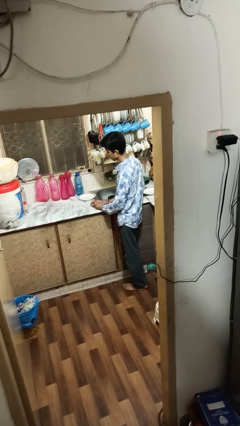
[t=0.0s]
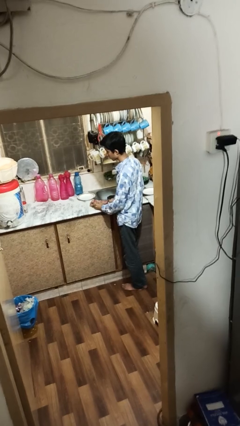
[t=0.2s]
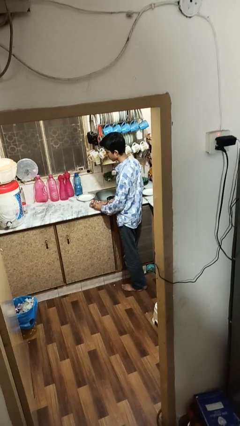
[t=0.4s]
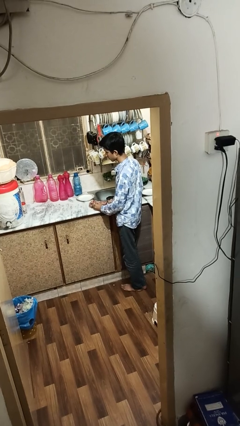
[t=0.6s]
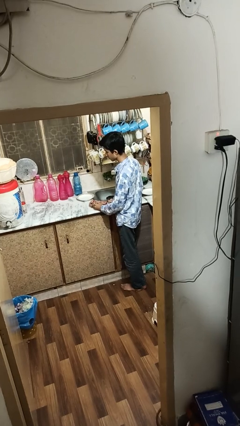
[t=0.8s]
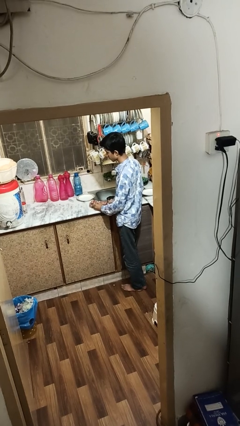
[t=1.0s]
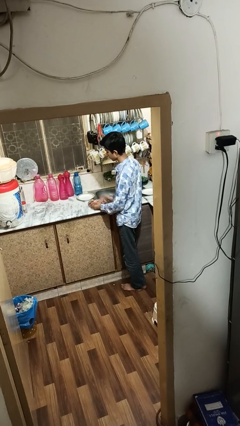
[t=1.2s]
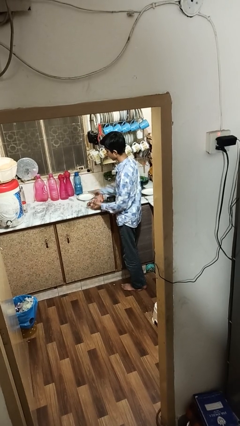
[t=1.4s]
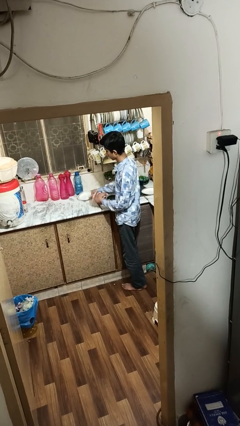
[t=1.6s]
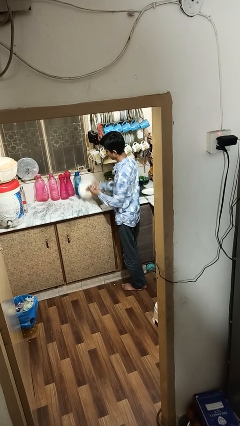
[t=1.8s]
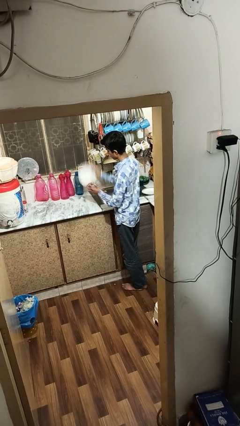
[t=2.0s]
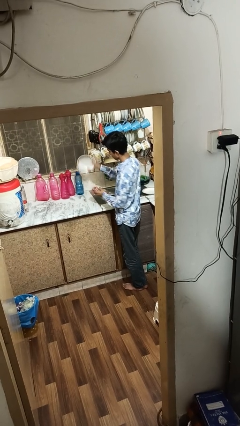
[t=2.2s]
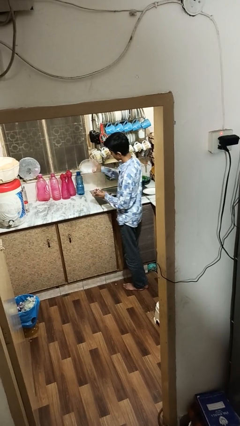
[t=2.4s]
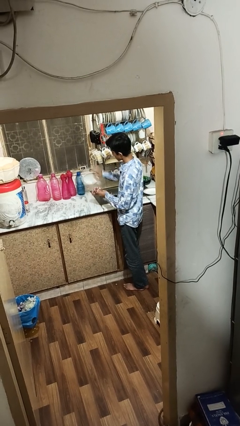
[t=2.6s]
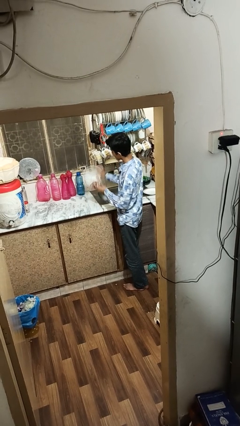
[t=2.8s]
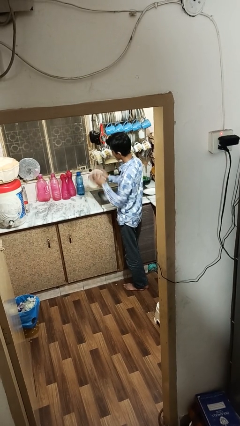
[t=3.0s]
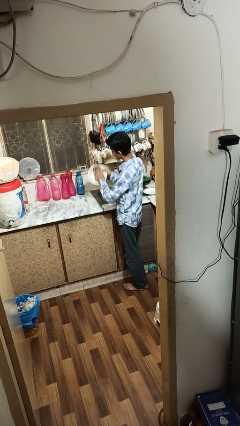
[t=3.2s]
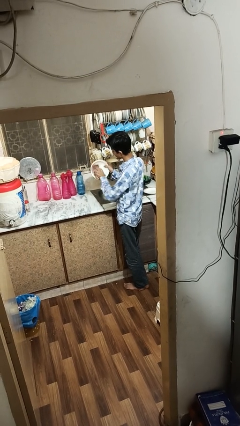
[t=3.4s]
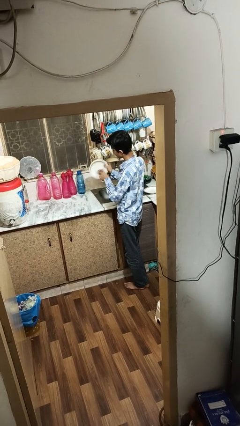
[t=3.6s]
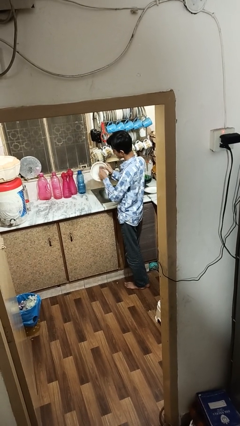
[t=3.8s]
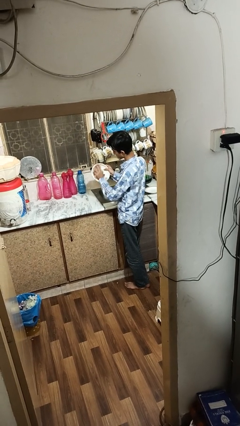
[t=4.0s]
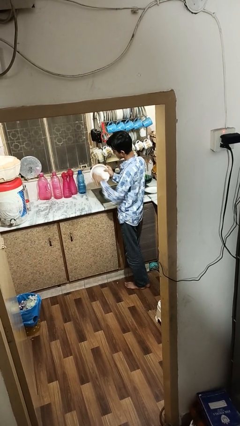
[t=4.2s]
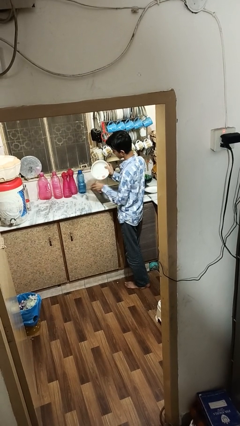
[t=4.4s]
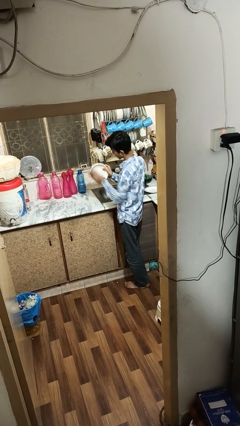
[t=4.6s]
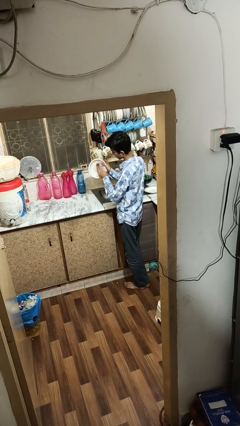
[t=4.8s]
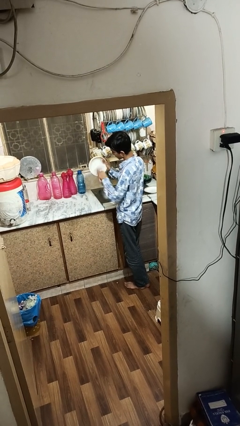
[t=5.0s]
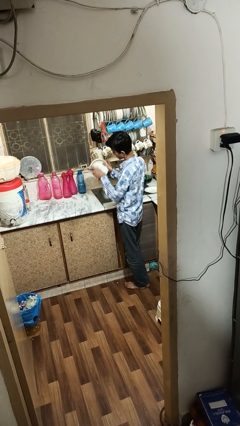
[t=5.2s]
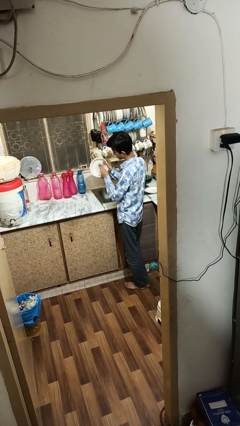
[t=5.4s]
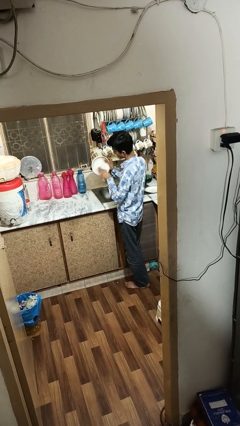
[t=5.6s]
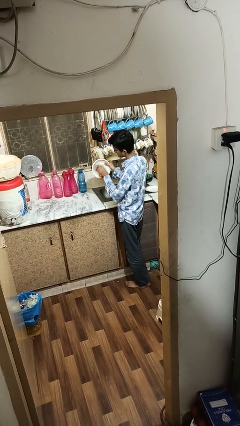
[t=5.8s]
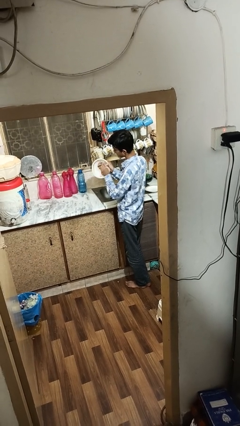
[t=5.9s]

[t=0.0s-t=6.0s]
person dries dish

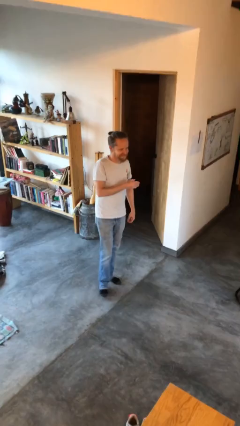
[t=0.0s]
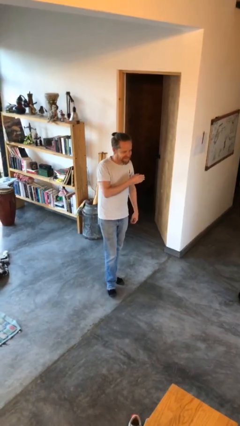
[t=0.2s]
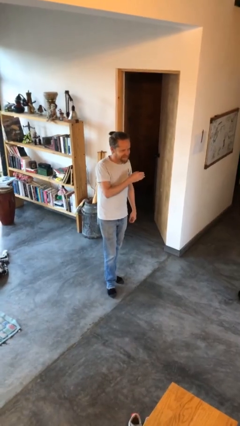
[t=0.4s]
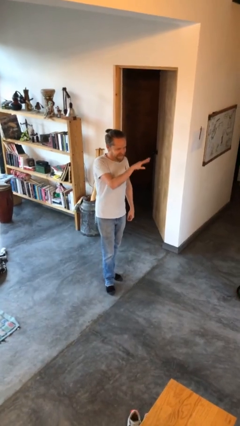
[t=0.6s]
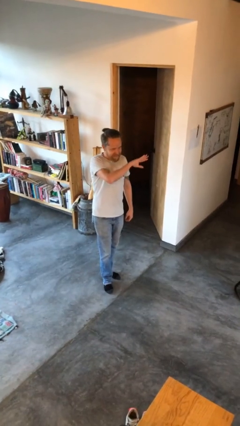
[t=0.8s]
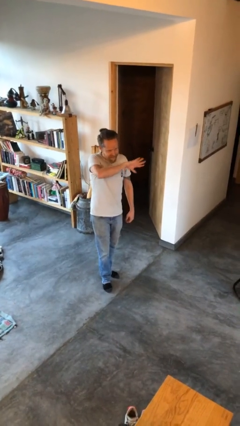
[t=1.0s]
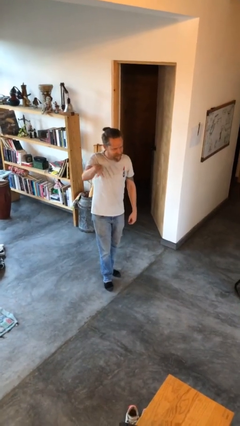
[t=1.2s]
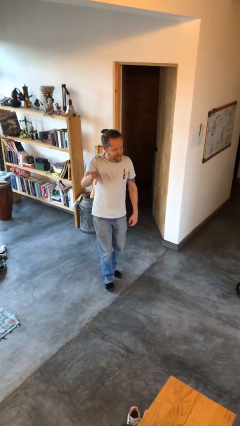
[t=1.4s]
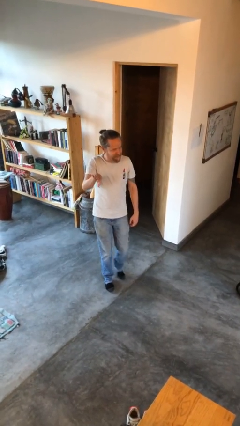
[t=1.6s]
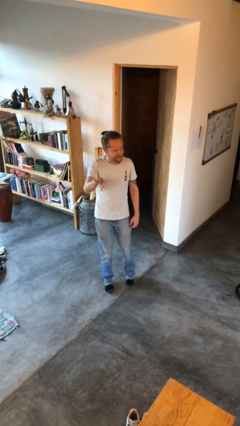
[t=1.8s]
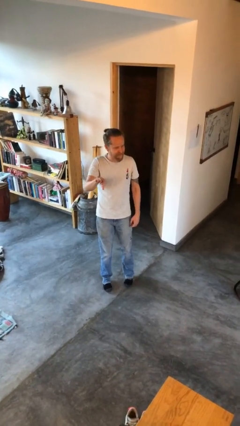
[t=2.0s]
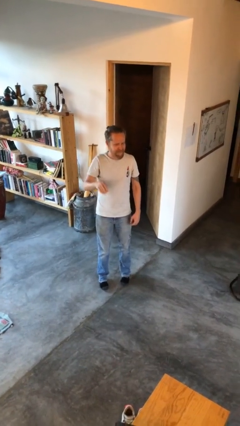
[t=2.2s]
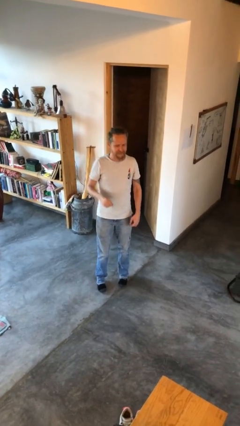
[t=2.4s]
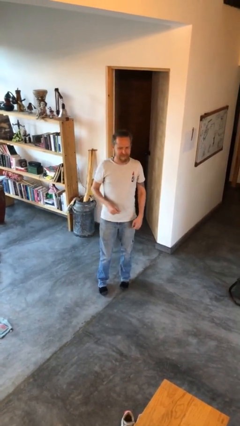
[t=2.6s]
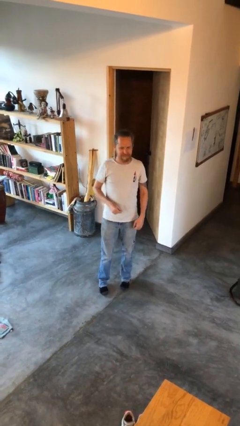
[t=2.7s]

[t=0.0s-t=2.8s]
person gestures swipe right

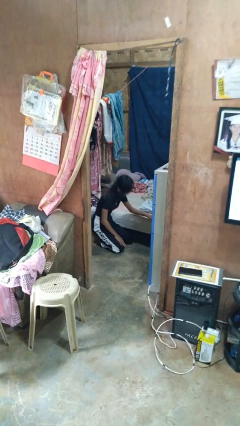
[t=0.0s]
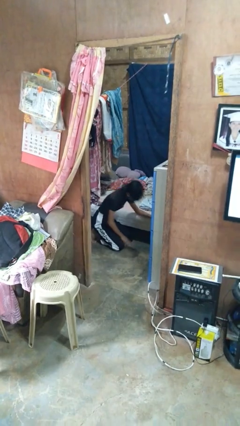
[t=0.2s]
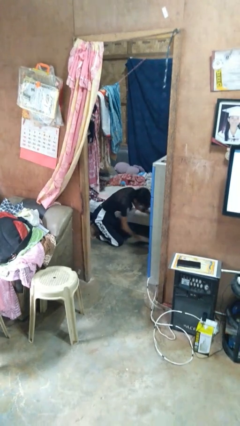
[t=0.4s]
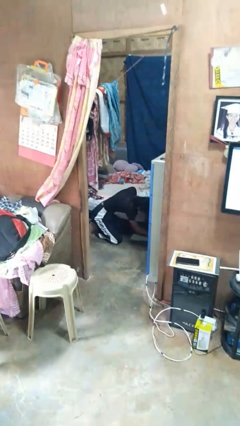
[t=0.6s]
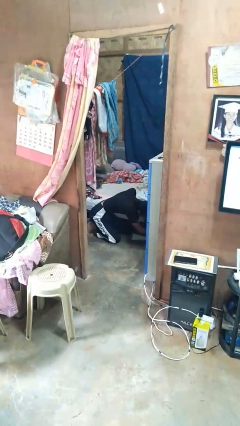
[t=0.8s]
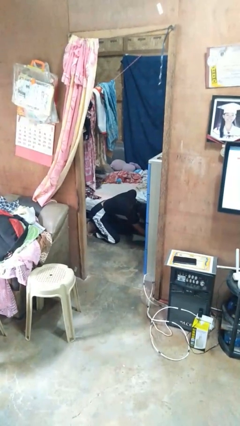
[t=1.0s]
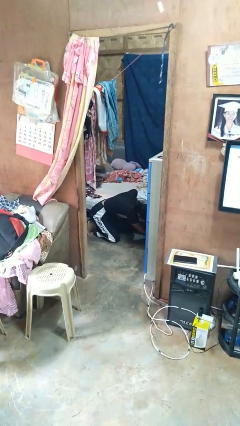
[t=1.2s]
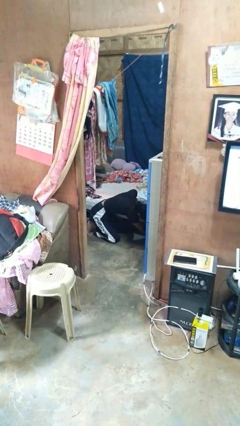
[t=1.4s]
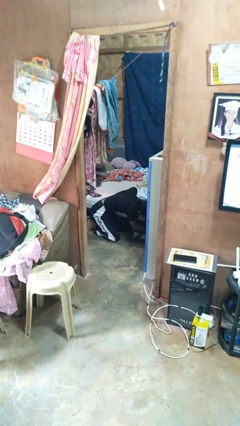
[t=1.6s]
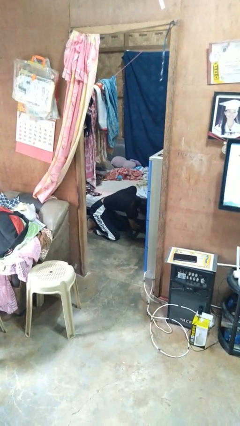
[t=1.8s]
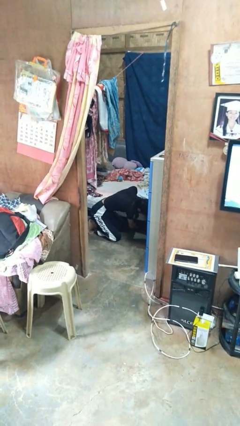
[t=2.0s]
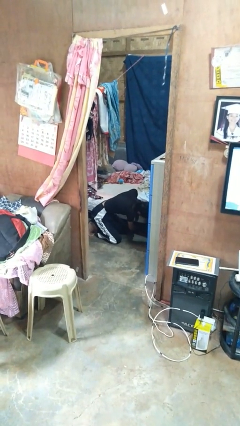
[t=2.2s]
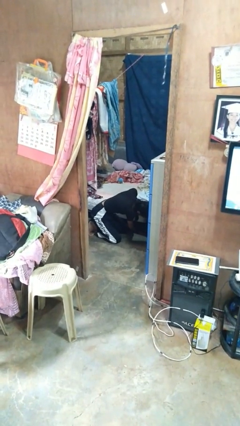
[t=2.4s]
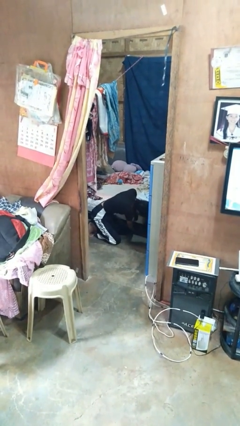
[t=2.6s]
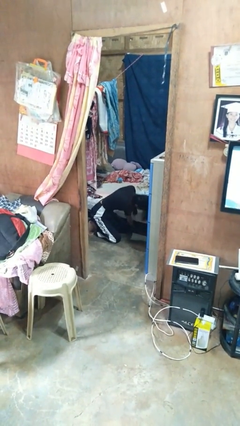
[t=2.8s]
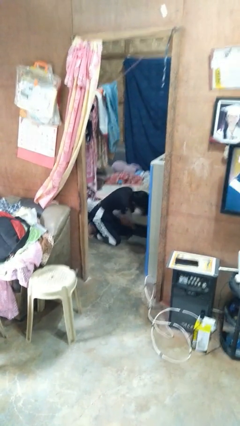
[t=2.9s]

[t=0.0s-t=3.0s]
person searches under bed

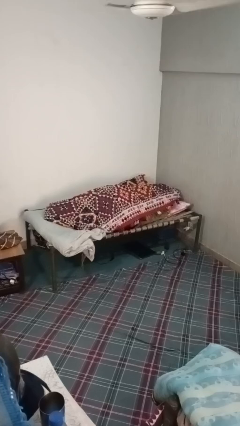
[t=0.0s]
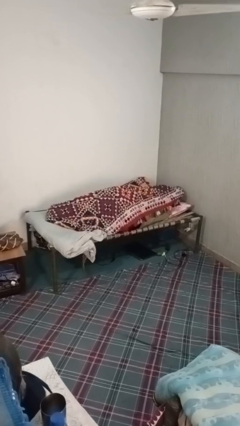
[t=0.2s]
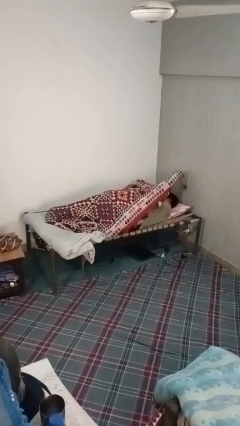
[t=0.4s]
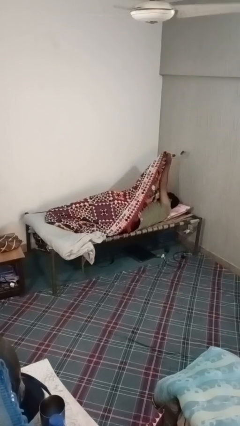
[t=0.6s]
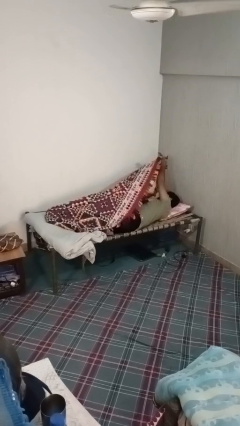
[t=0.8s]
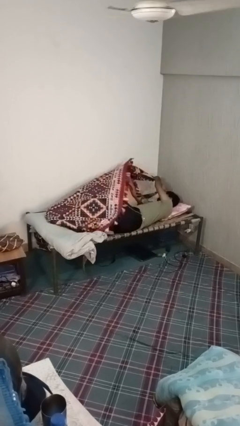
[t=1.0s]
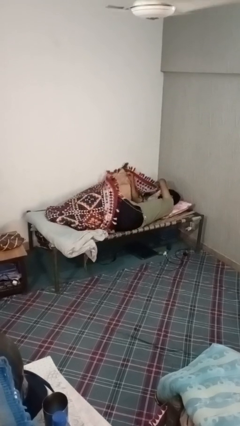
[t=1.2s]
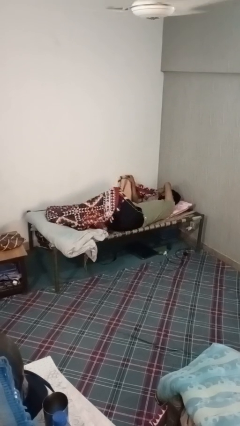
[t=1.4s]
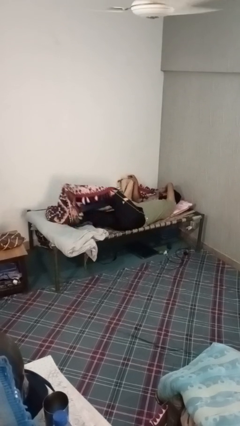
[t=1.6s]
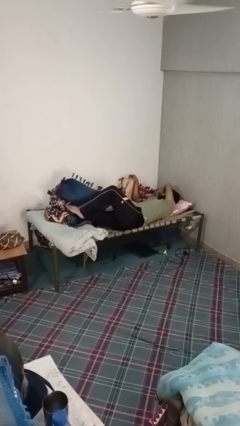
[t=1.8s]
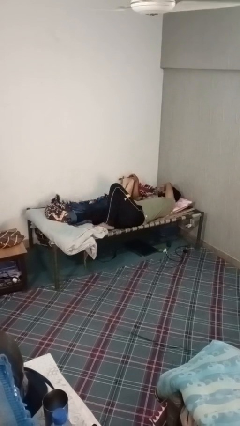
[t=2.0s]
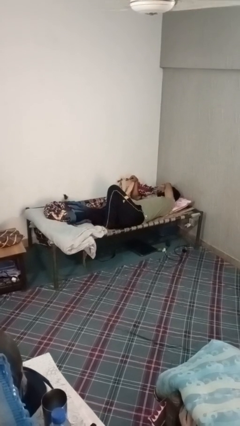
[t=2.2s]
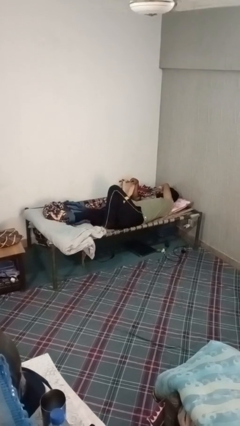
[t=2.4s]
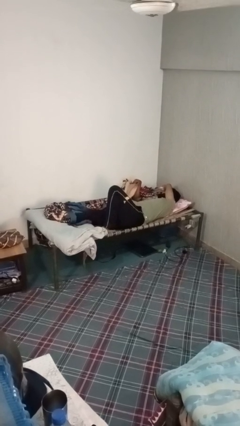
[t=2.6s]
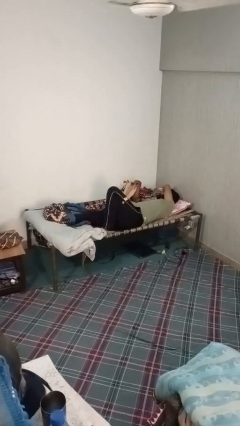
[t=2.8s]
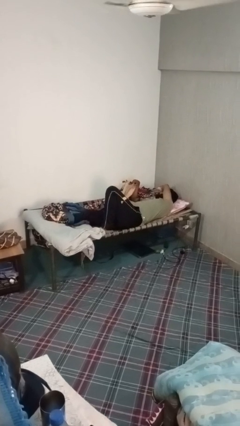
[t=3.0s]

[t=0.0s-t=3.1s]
person uncovers with blanket

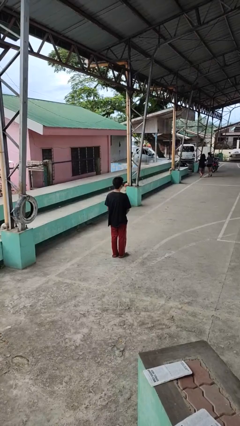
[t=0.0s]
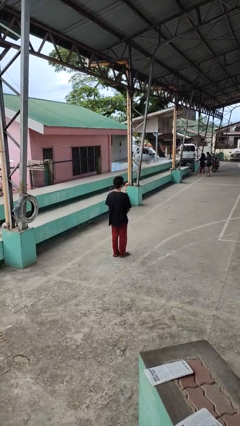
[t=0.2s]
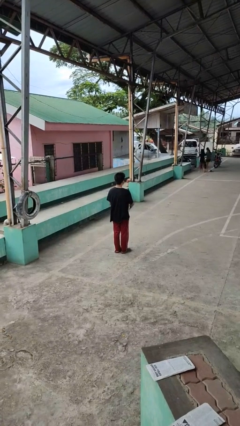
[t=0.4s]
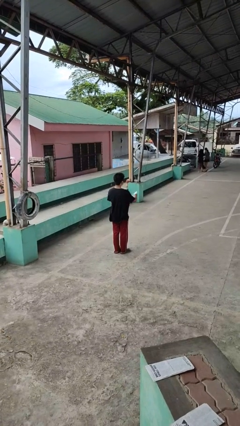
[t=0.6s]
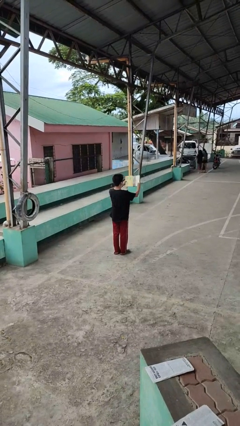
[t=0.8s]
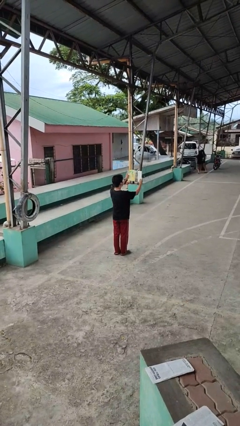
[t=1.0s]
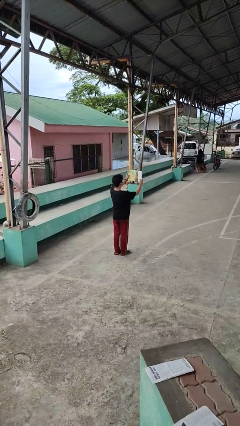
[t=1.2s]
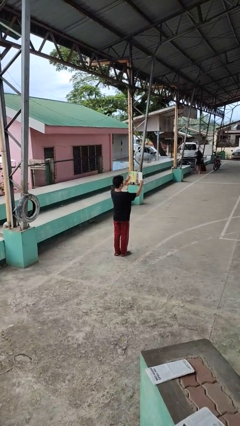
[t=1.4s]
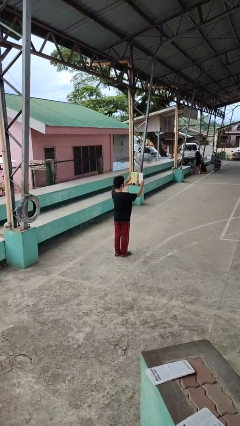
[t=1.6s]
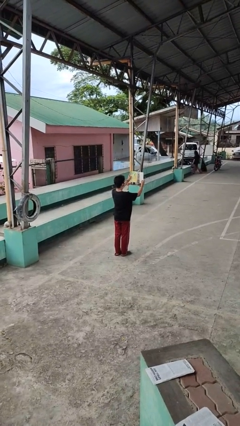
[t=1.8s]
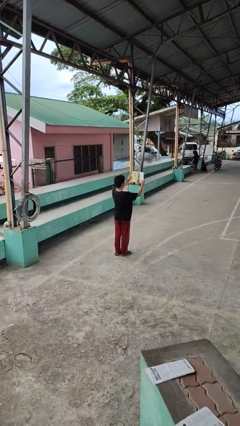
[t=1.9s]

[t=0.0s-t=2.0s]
person reads book

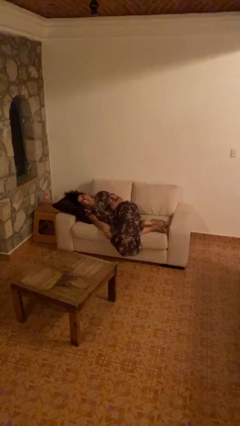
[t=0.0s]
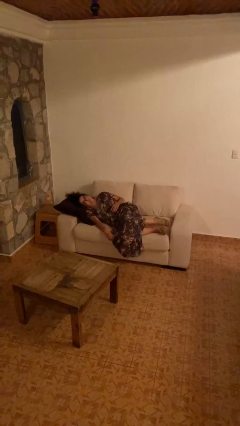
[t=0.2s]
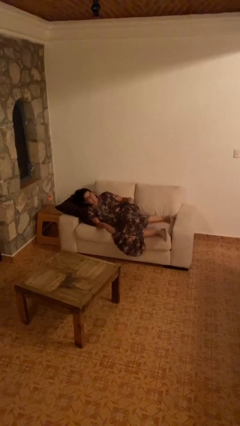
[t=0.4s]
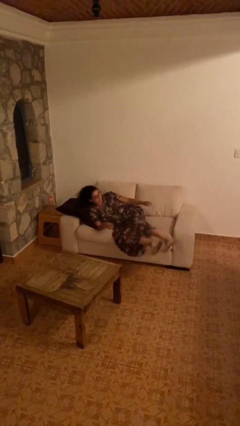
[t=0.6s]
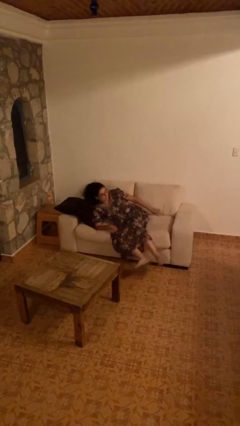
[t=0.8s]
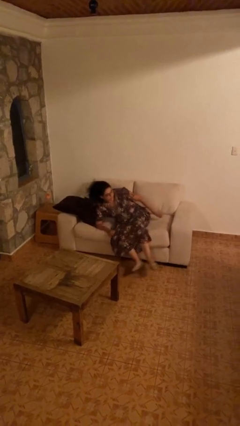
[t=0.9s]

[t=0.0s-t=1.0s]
person stands up
